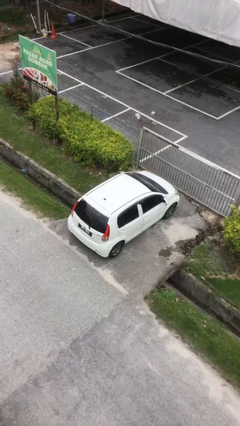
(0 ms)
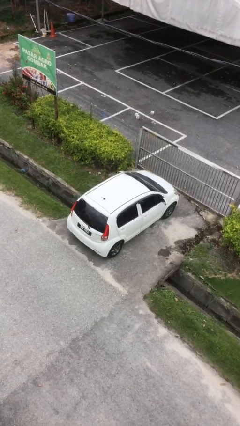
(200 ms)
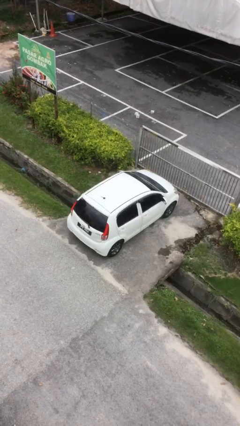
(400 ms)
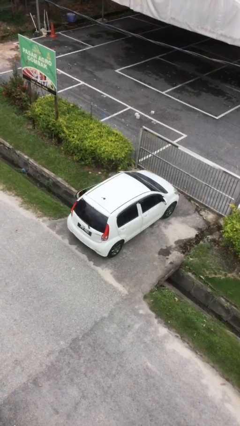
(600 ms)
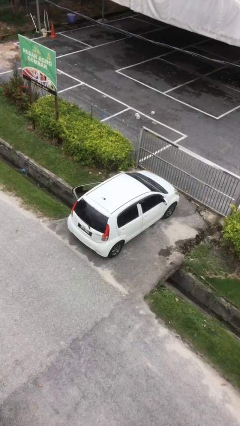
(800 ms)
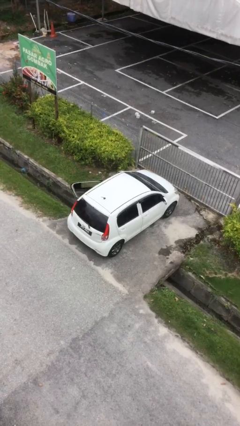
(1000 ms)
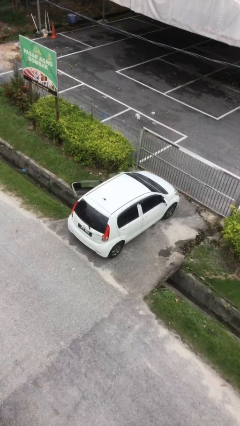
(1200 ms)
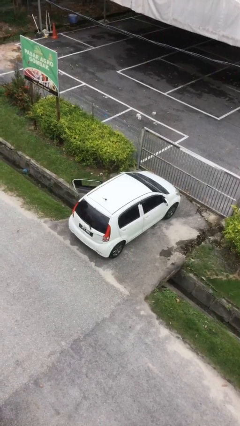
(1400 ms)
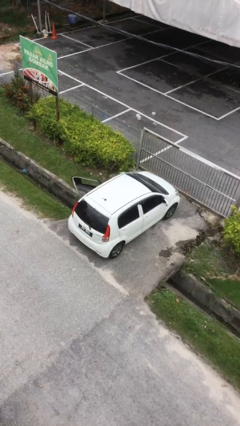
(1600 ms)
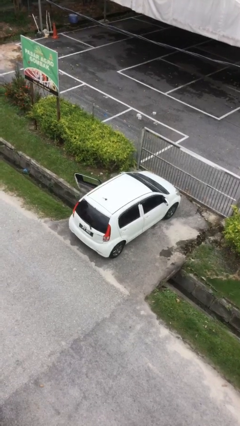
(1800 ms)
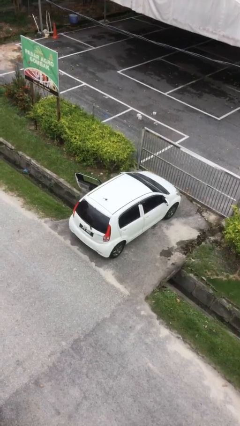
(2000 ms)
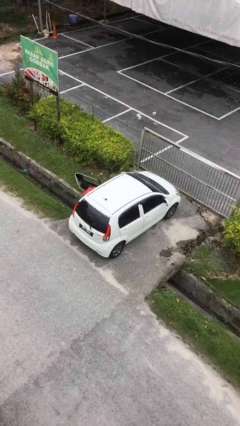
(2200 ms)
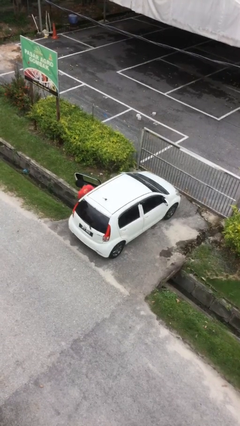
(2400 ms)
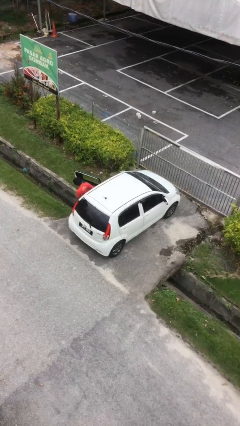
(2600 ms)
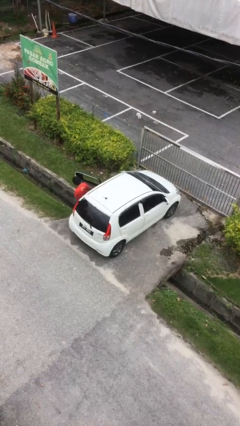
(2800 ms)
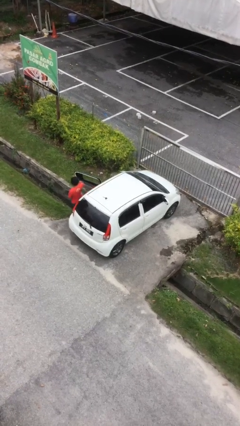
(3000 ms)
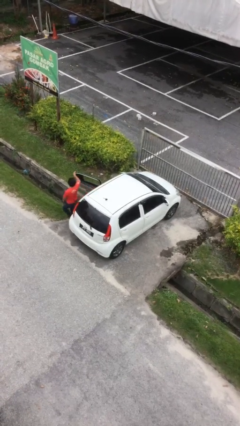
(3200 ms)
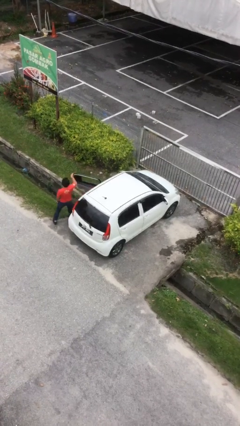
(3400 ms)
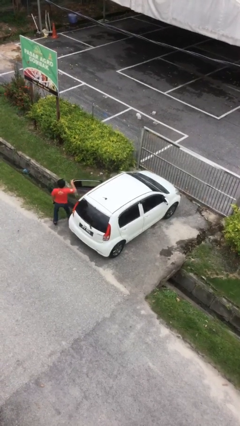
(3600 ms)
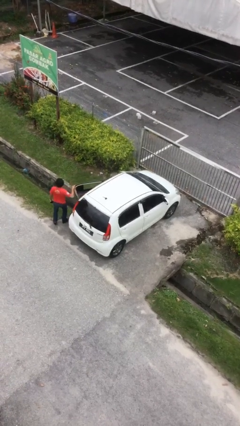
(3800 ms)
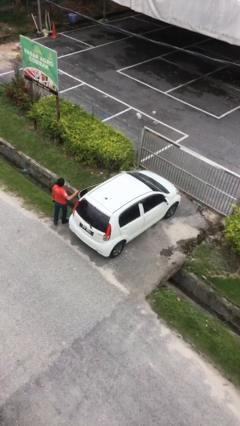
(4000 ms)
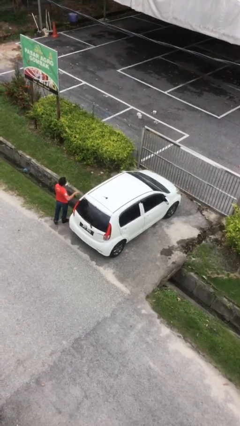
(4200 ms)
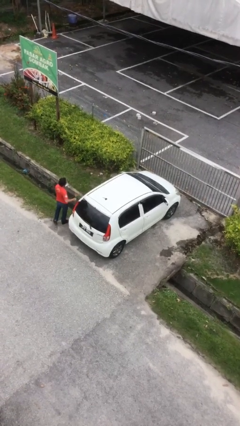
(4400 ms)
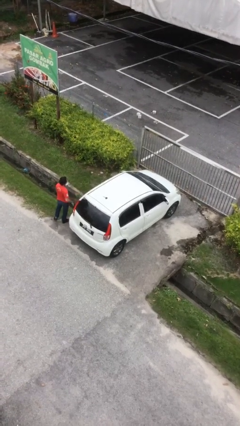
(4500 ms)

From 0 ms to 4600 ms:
car drops off person

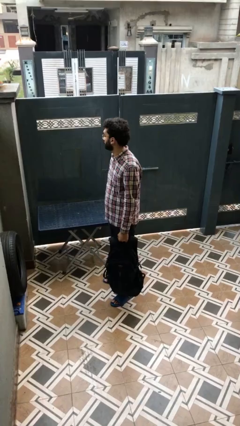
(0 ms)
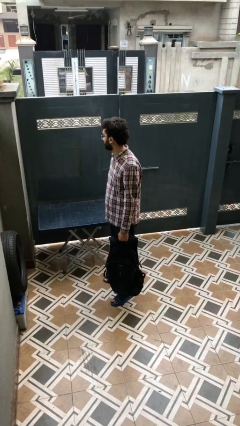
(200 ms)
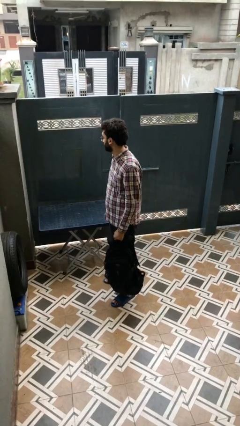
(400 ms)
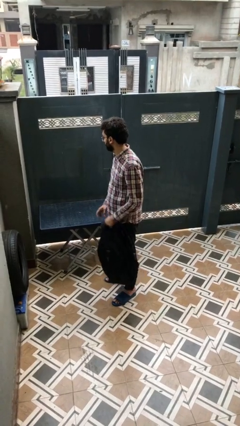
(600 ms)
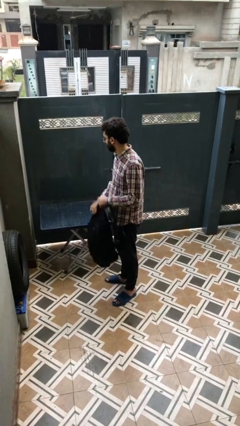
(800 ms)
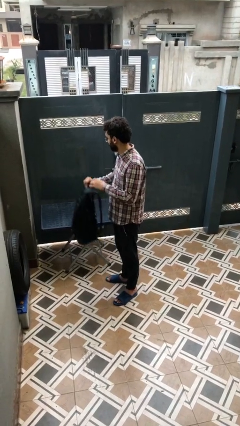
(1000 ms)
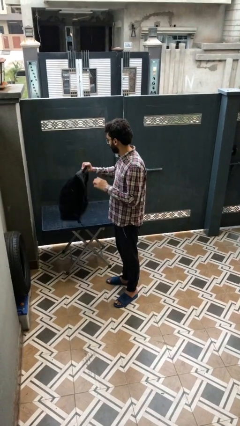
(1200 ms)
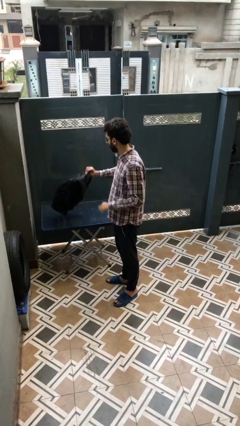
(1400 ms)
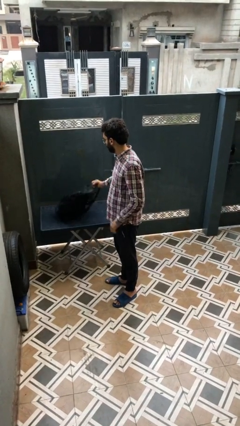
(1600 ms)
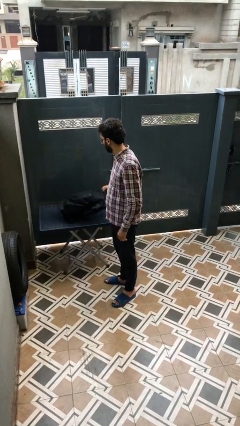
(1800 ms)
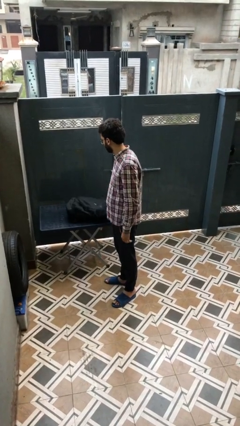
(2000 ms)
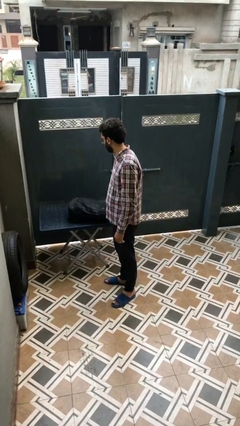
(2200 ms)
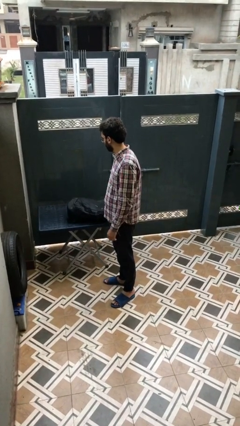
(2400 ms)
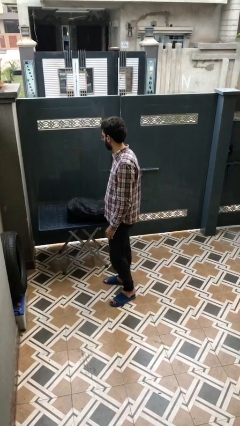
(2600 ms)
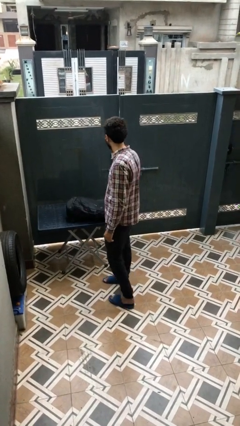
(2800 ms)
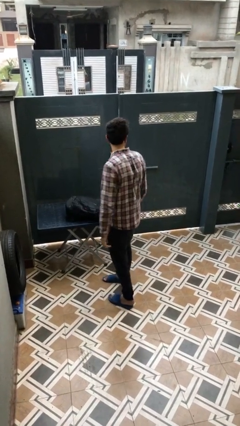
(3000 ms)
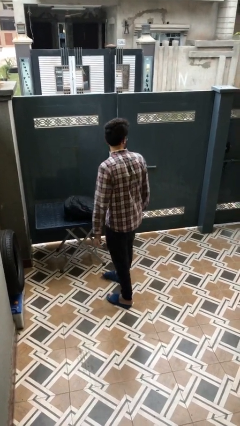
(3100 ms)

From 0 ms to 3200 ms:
person puts down object on table

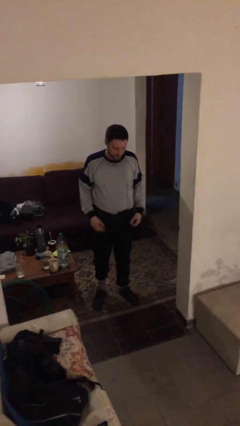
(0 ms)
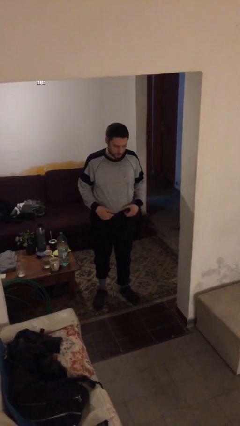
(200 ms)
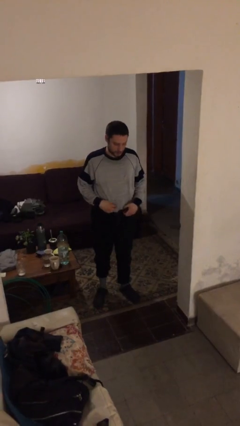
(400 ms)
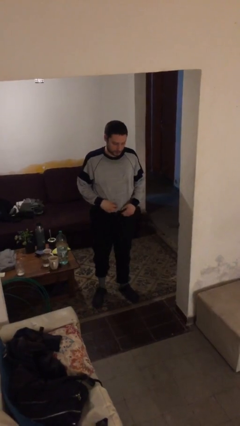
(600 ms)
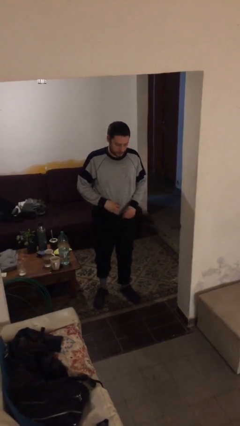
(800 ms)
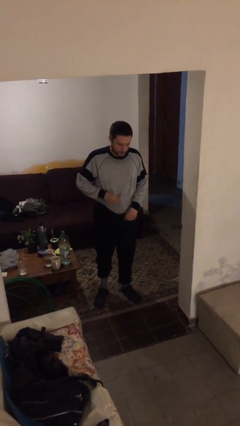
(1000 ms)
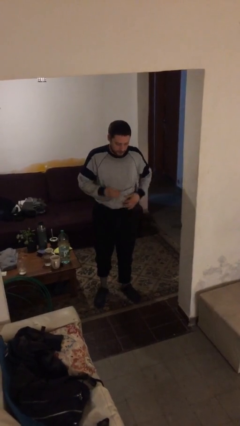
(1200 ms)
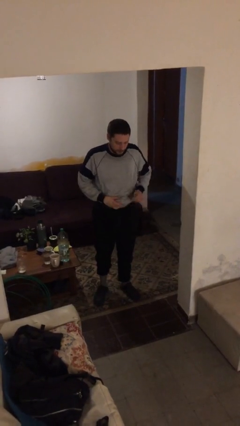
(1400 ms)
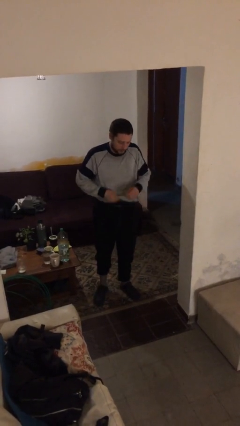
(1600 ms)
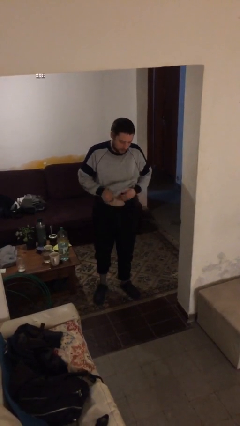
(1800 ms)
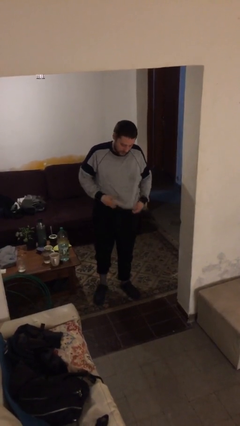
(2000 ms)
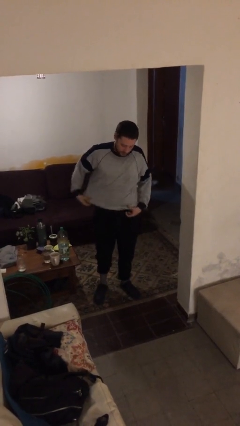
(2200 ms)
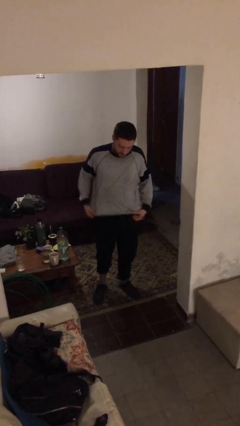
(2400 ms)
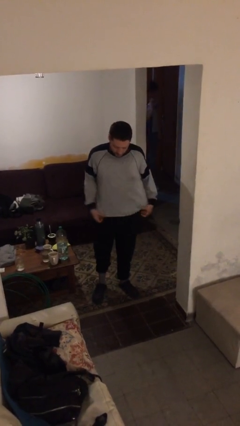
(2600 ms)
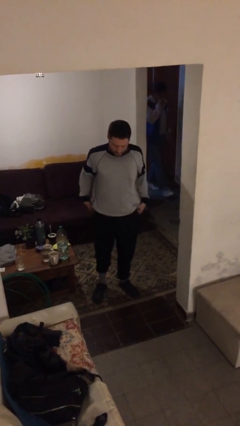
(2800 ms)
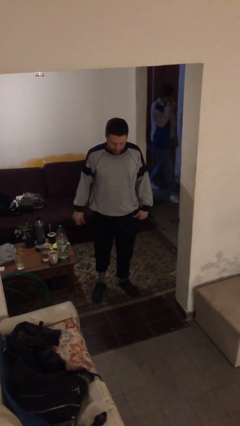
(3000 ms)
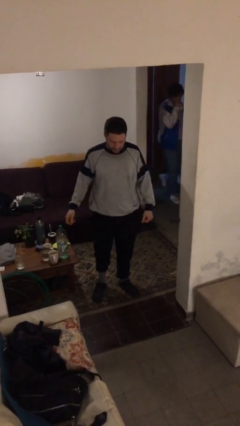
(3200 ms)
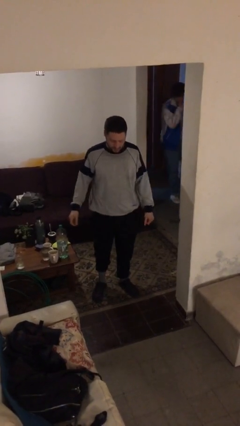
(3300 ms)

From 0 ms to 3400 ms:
person untucks shirt

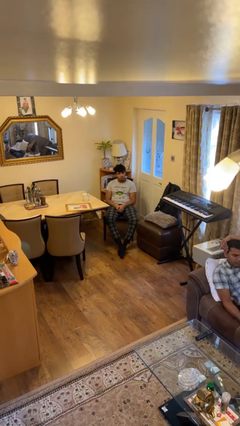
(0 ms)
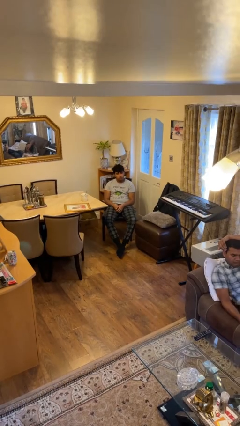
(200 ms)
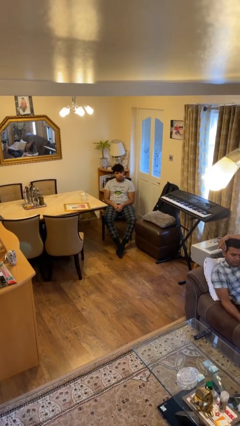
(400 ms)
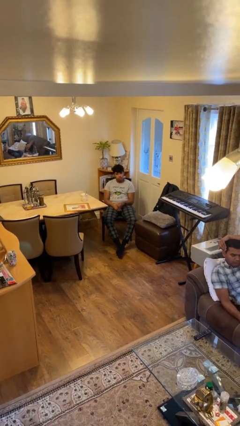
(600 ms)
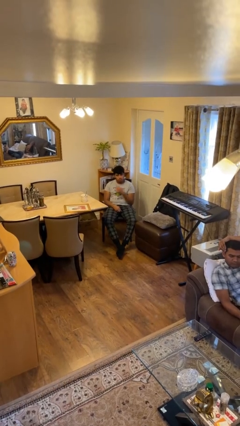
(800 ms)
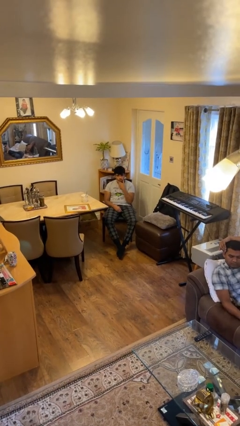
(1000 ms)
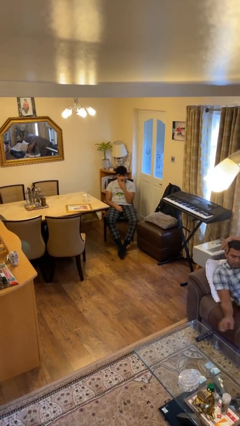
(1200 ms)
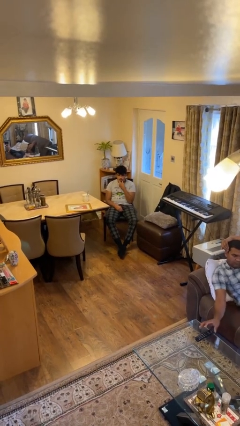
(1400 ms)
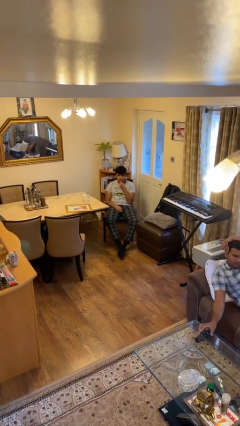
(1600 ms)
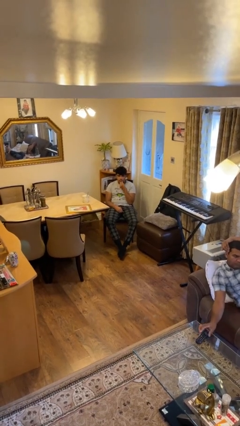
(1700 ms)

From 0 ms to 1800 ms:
person strokes chin

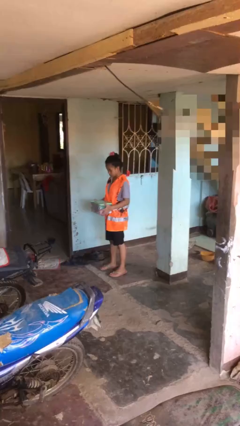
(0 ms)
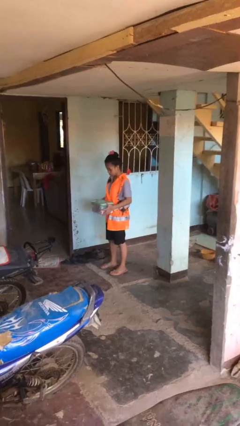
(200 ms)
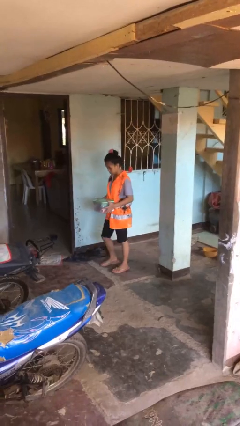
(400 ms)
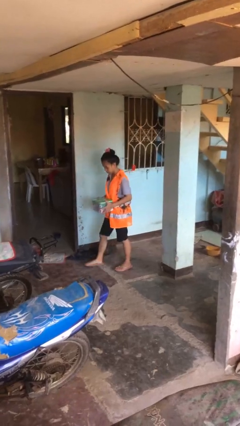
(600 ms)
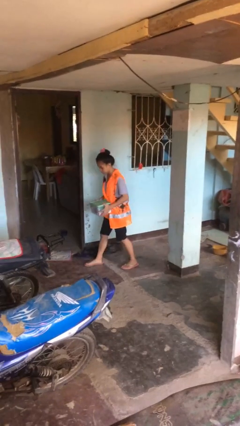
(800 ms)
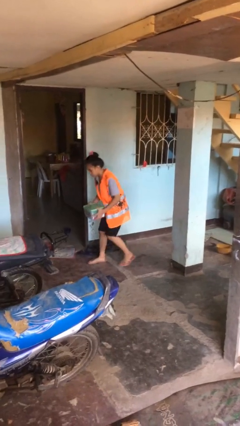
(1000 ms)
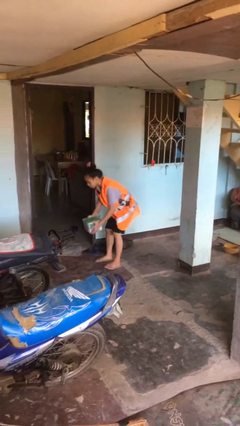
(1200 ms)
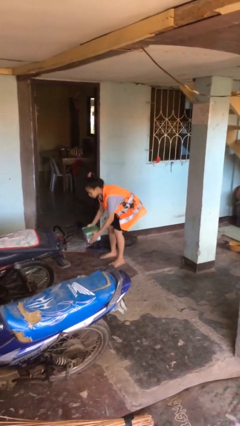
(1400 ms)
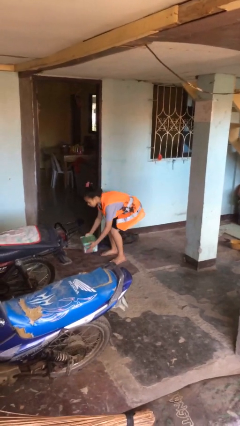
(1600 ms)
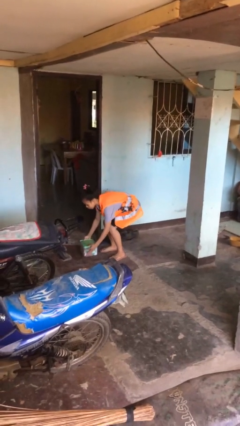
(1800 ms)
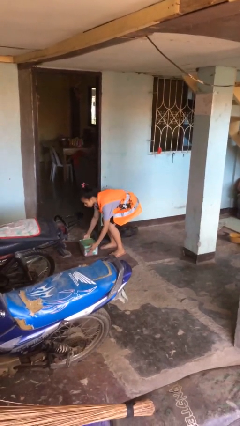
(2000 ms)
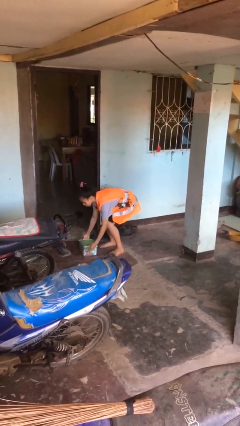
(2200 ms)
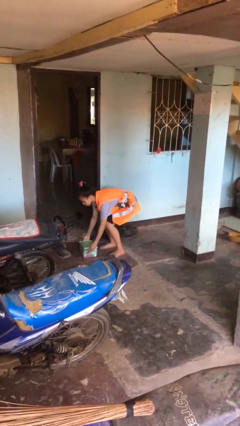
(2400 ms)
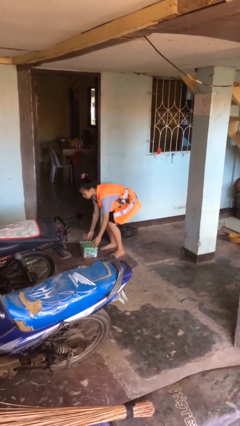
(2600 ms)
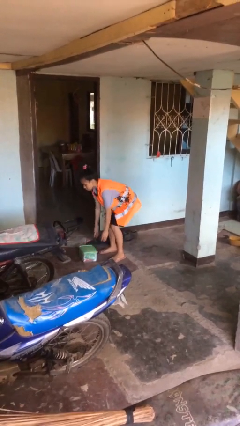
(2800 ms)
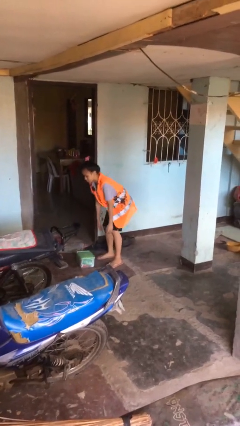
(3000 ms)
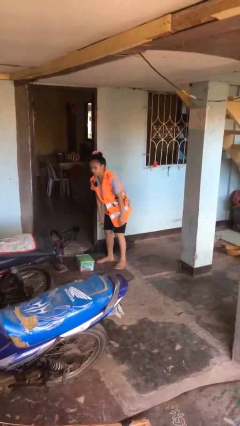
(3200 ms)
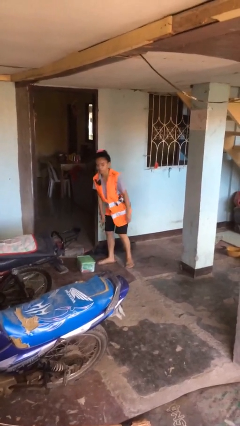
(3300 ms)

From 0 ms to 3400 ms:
person puts down object on floor

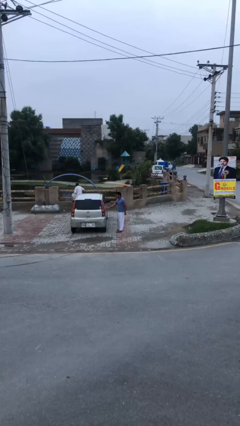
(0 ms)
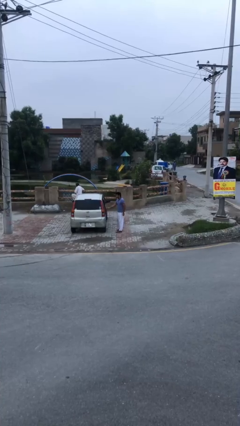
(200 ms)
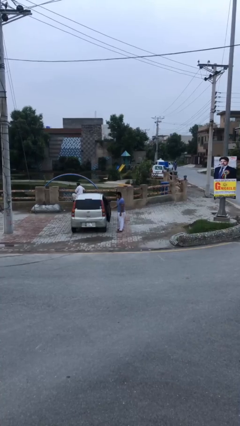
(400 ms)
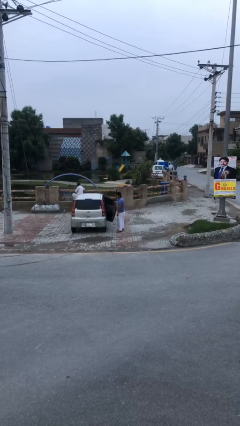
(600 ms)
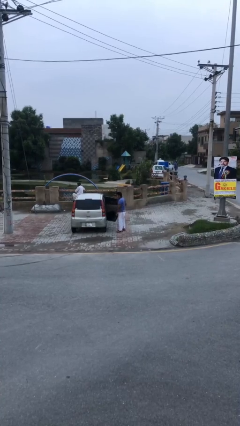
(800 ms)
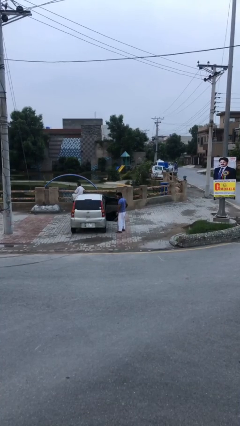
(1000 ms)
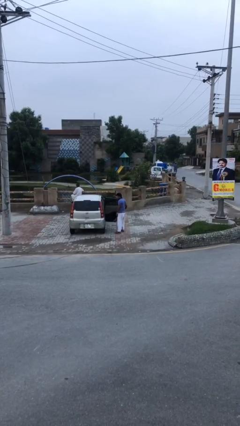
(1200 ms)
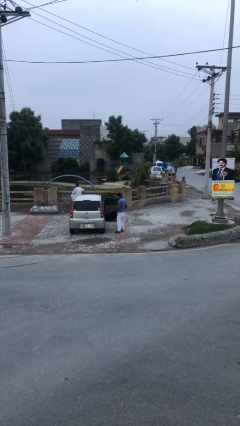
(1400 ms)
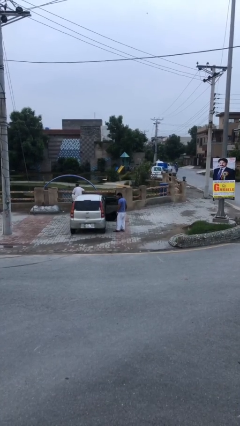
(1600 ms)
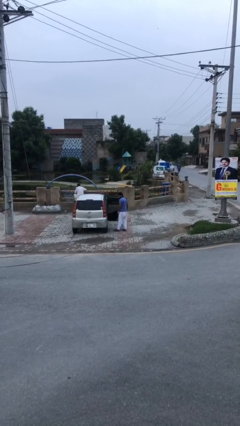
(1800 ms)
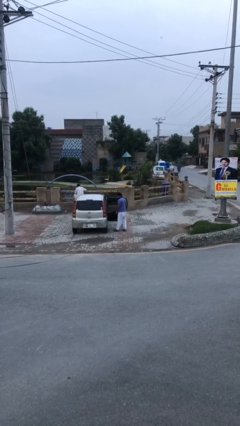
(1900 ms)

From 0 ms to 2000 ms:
person opens car door
